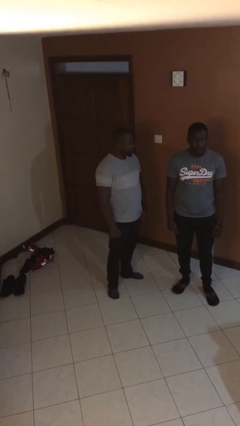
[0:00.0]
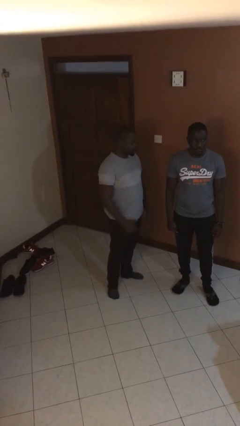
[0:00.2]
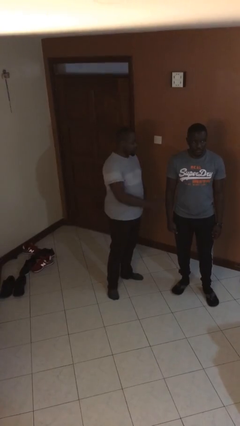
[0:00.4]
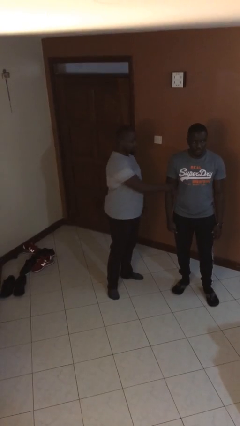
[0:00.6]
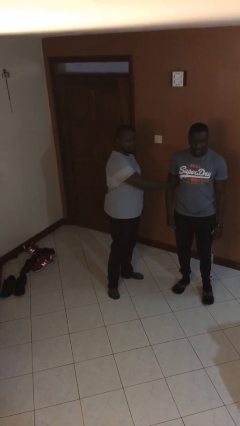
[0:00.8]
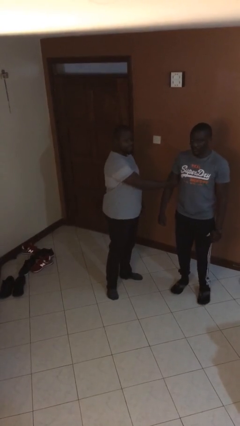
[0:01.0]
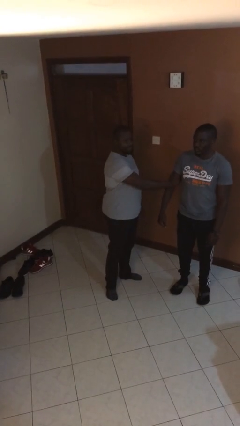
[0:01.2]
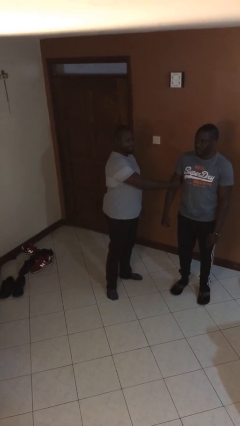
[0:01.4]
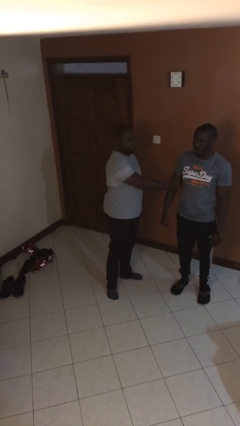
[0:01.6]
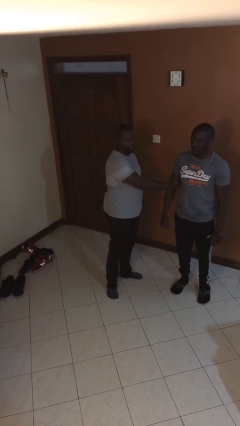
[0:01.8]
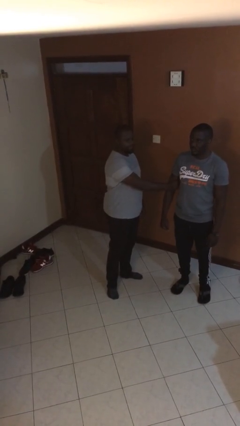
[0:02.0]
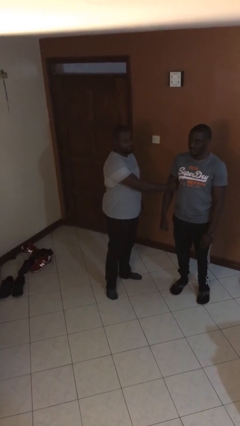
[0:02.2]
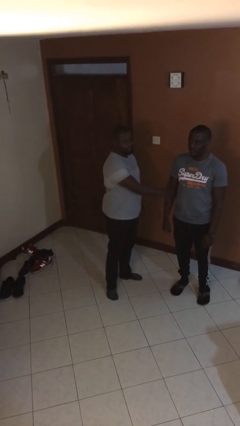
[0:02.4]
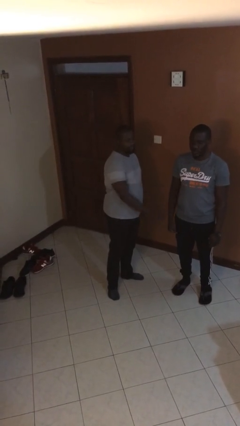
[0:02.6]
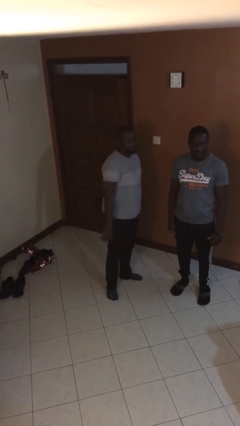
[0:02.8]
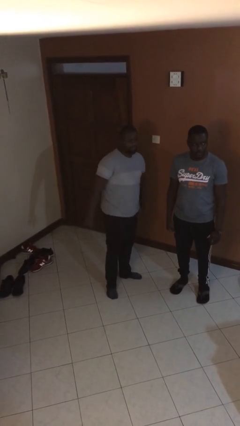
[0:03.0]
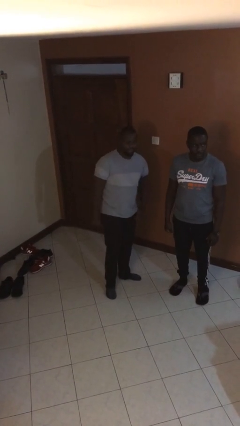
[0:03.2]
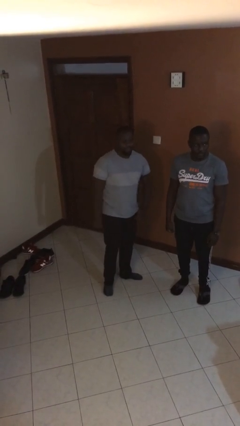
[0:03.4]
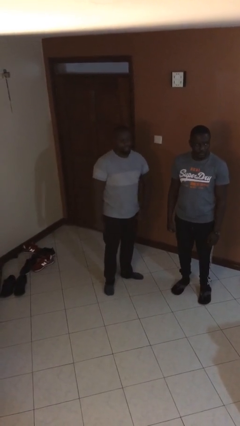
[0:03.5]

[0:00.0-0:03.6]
person grabs person by bicep

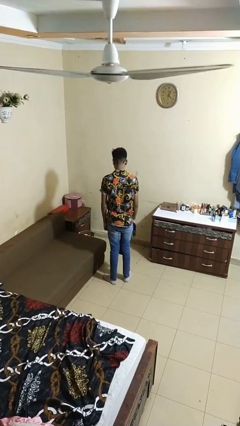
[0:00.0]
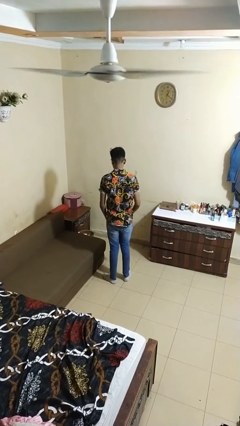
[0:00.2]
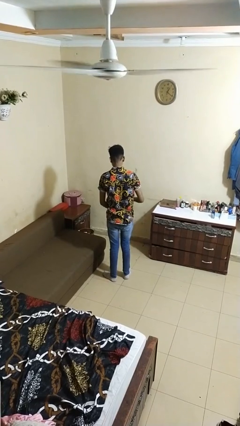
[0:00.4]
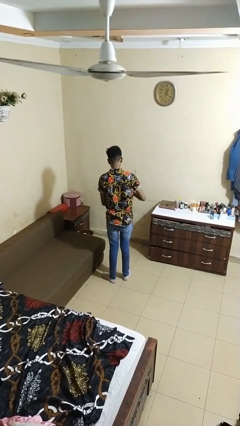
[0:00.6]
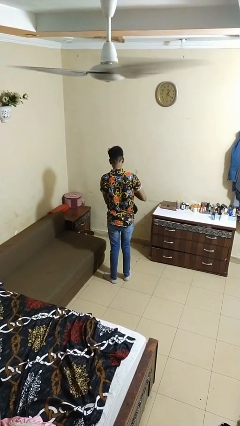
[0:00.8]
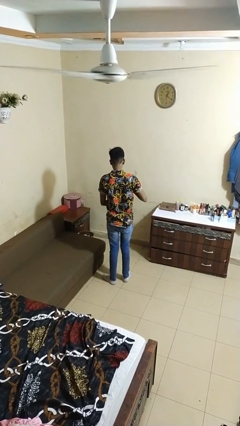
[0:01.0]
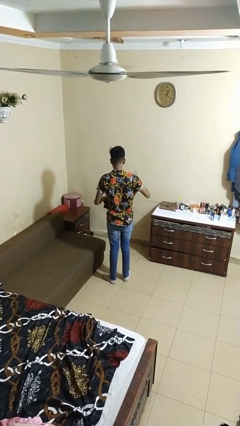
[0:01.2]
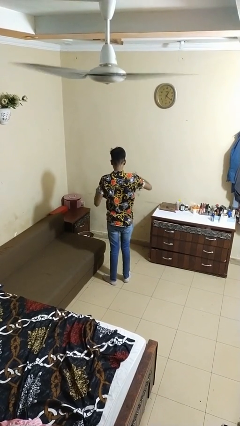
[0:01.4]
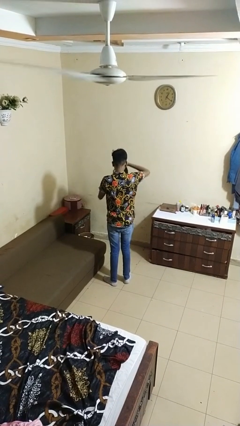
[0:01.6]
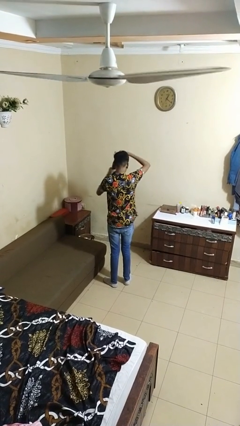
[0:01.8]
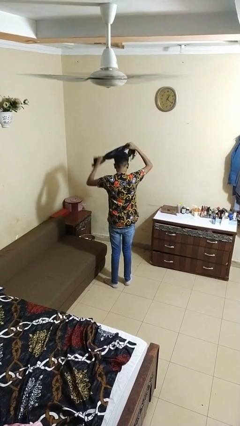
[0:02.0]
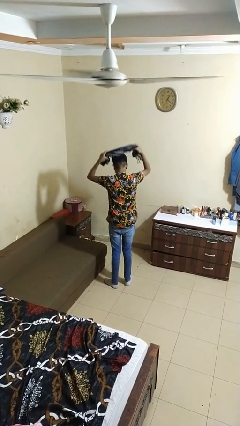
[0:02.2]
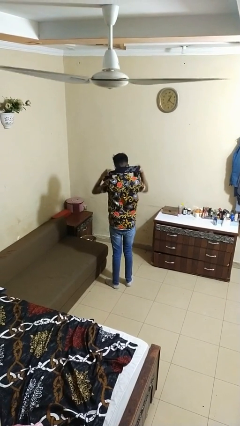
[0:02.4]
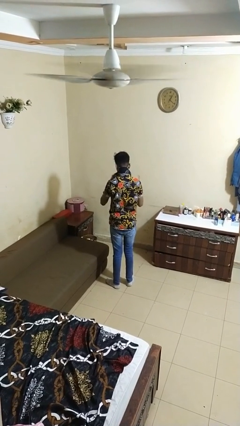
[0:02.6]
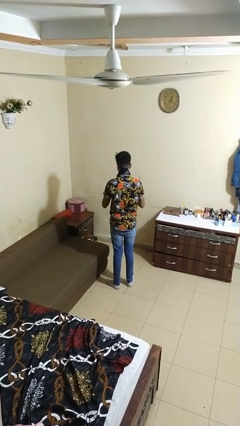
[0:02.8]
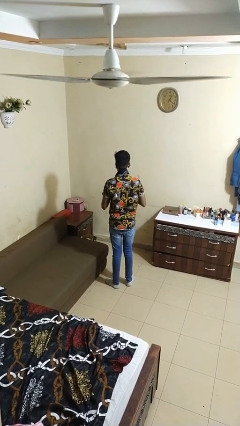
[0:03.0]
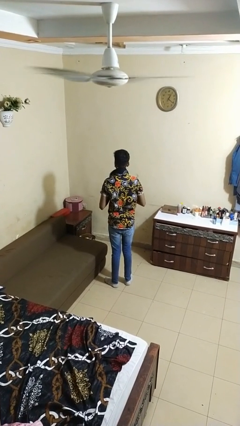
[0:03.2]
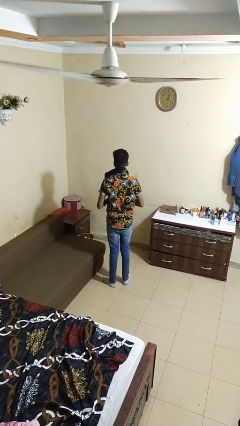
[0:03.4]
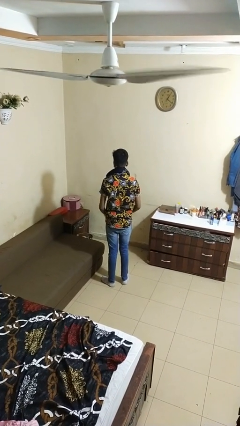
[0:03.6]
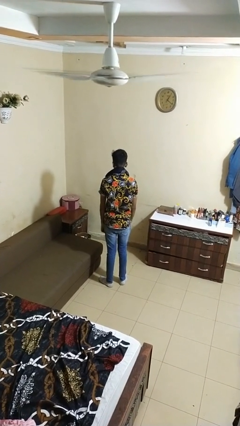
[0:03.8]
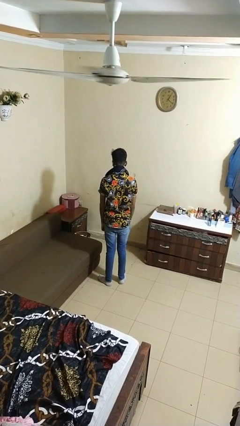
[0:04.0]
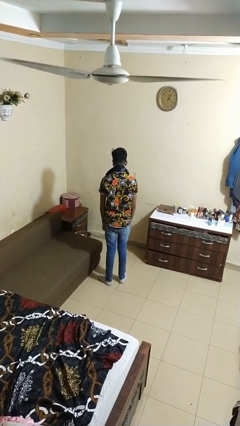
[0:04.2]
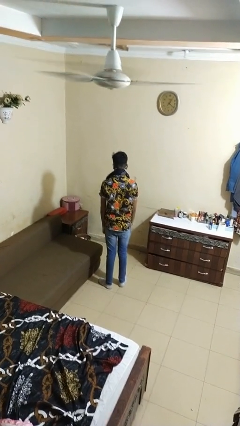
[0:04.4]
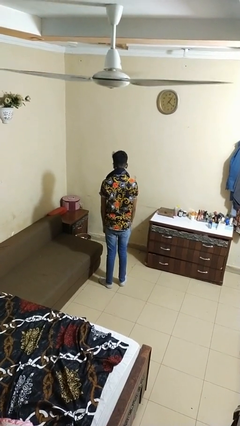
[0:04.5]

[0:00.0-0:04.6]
person puts on scarf

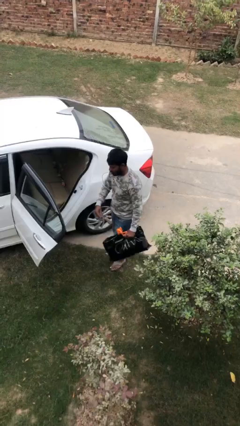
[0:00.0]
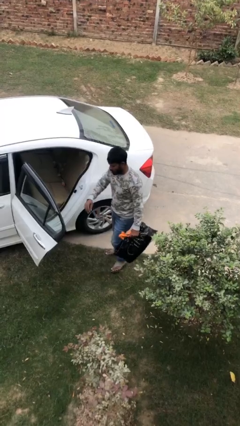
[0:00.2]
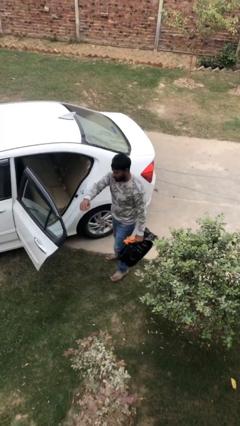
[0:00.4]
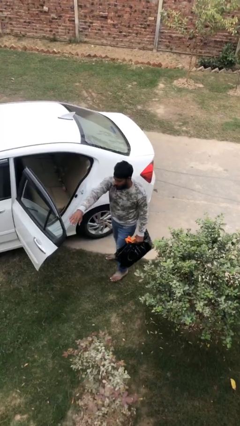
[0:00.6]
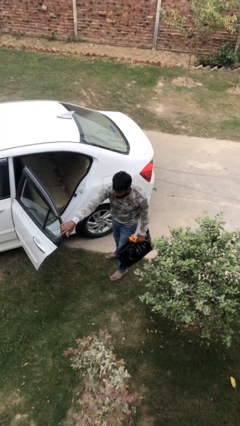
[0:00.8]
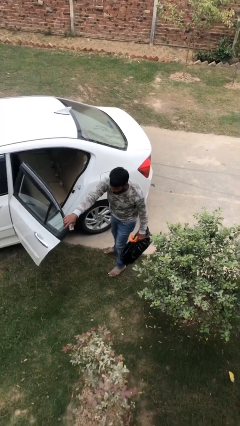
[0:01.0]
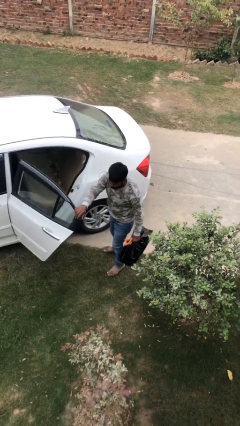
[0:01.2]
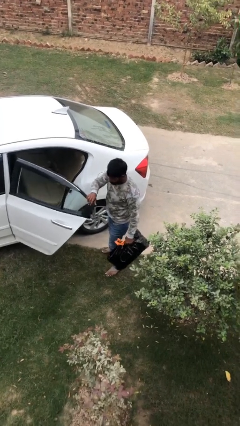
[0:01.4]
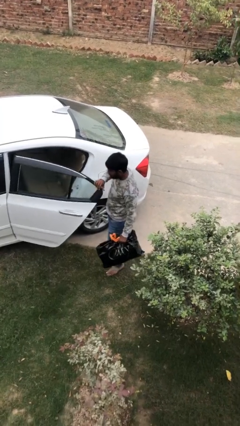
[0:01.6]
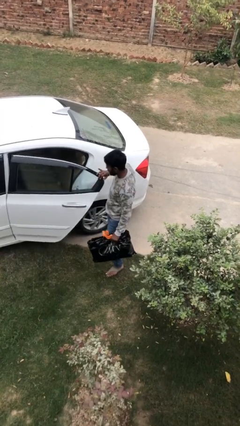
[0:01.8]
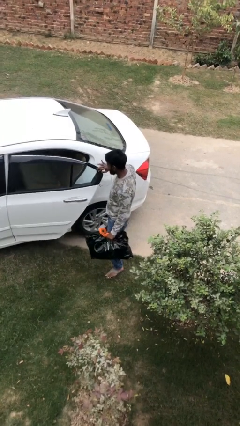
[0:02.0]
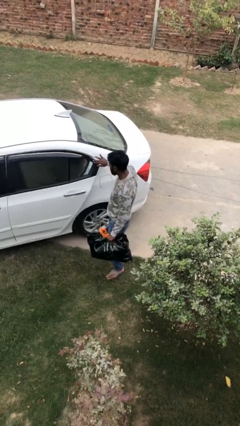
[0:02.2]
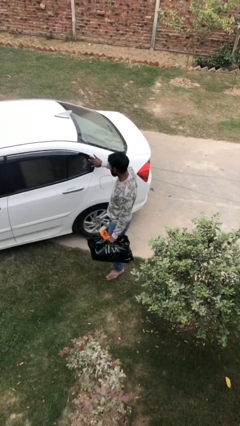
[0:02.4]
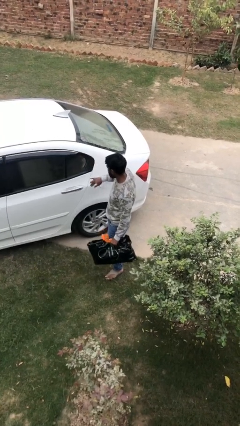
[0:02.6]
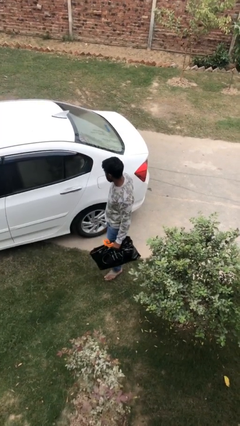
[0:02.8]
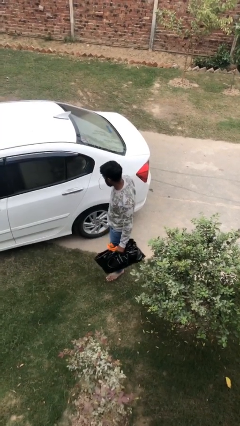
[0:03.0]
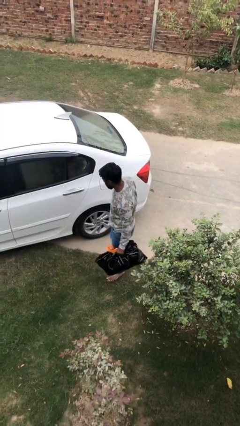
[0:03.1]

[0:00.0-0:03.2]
person closes car door

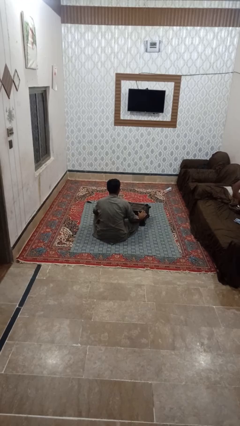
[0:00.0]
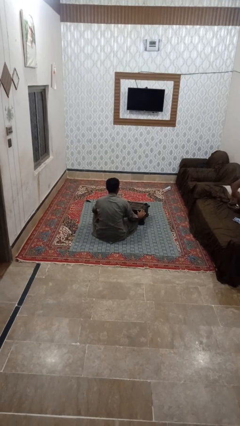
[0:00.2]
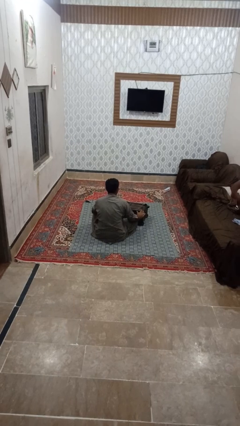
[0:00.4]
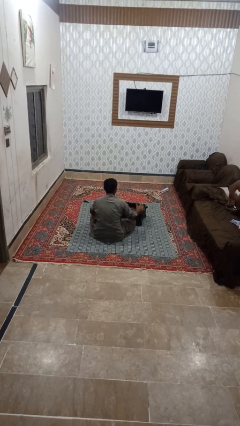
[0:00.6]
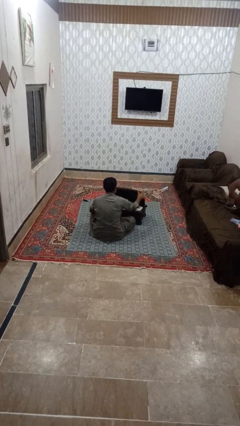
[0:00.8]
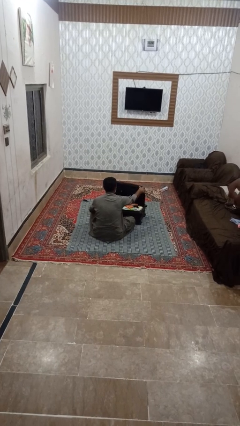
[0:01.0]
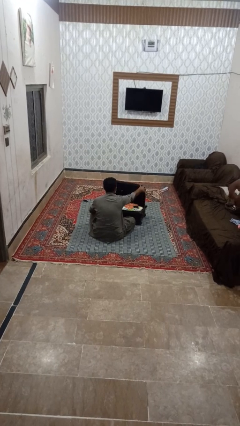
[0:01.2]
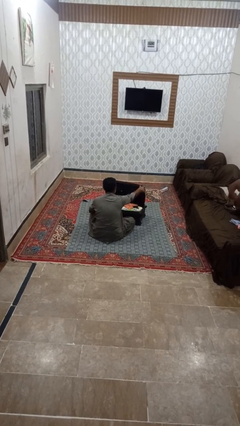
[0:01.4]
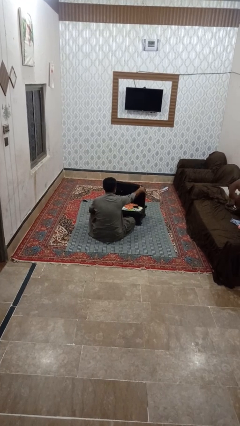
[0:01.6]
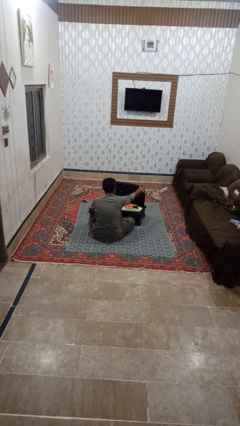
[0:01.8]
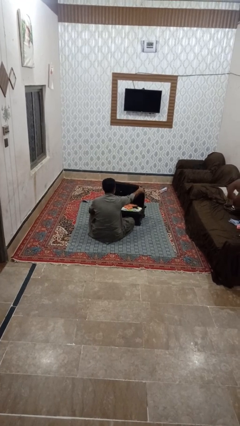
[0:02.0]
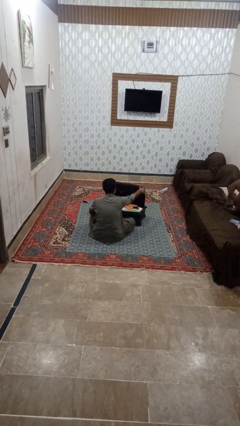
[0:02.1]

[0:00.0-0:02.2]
person opens suitcase

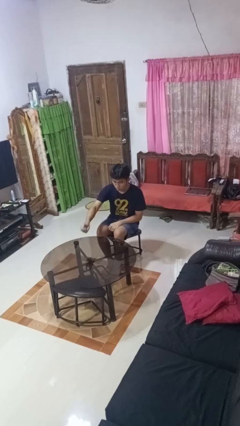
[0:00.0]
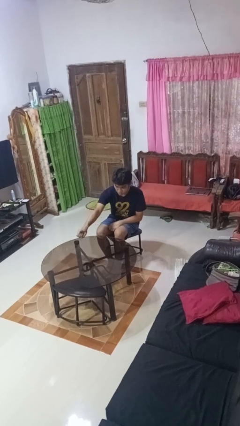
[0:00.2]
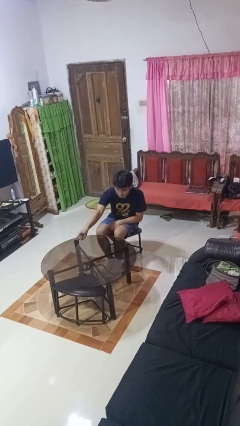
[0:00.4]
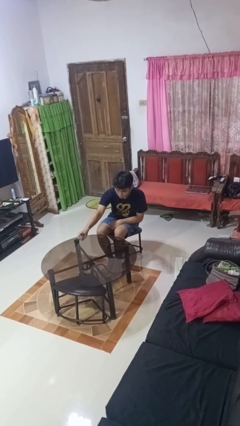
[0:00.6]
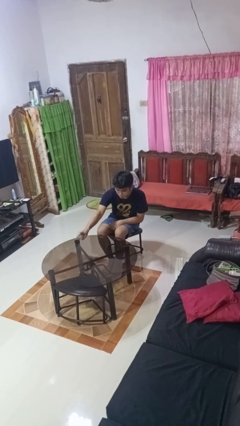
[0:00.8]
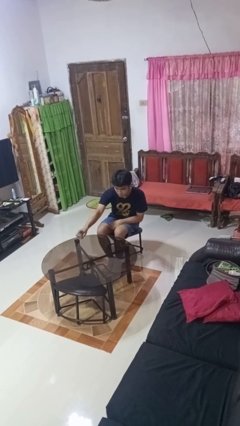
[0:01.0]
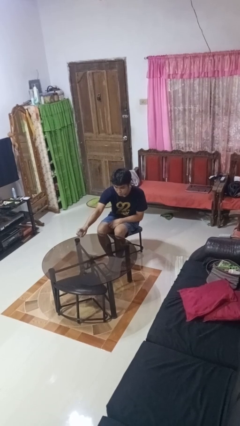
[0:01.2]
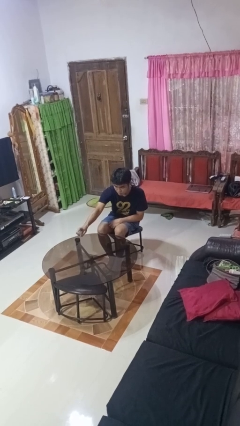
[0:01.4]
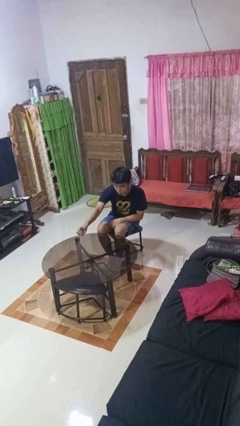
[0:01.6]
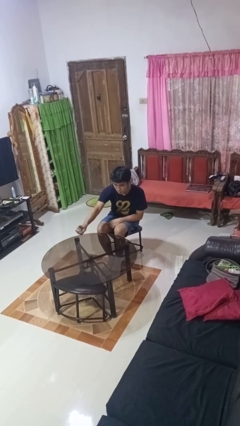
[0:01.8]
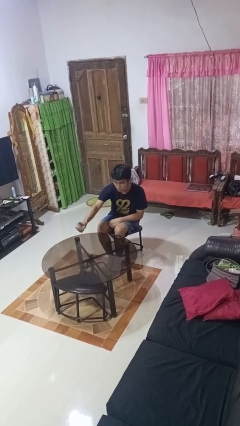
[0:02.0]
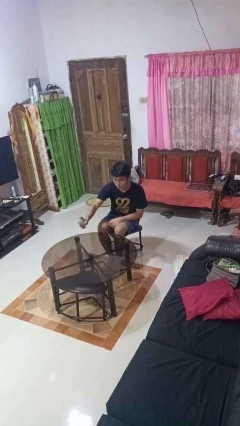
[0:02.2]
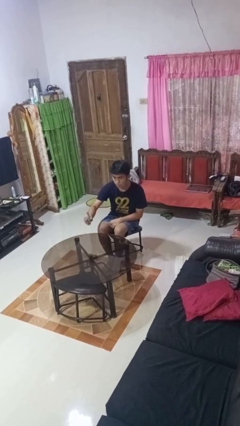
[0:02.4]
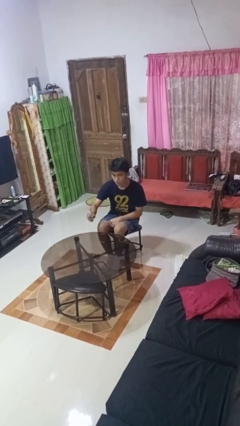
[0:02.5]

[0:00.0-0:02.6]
person sprays from bottle

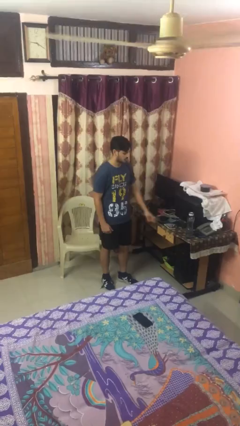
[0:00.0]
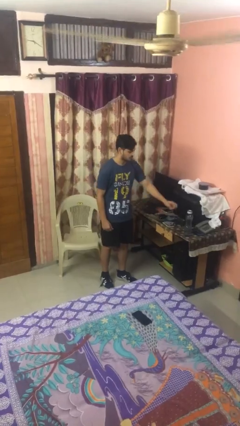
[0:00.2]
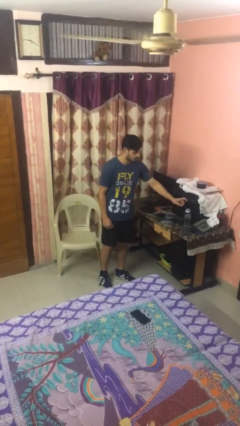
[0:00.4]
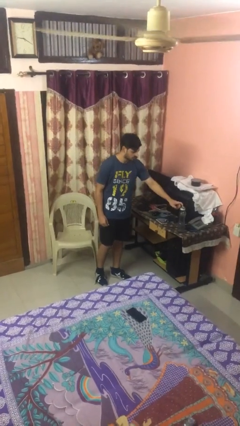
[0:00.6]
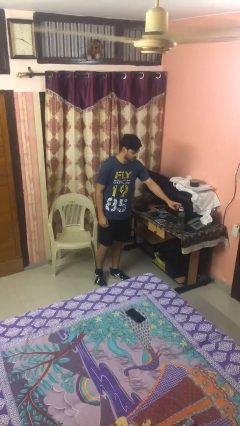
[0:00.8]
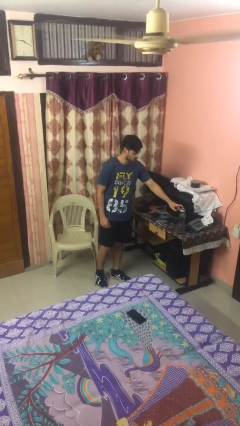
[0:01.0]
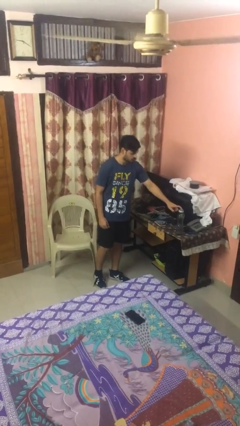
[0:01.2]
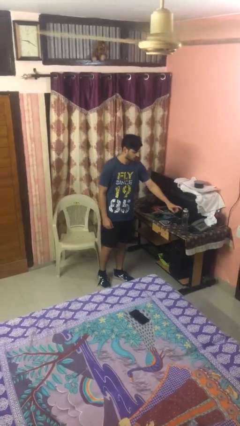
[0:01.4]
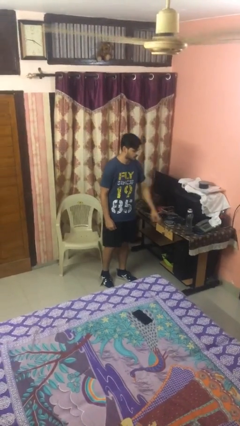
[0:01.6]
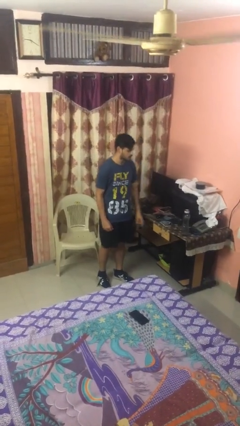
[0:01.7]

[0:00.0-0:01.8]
person taps object with finger
